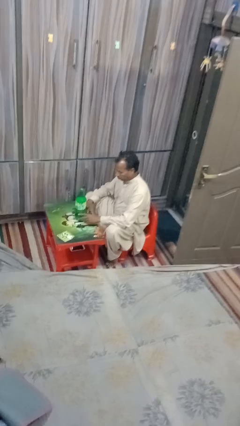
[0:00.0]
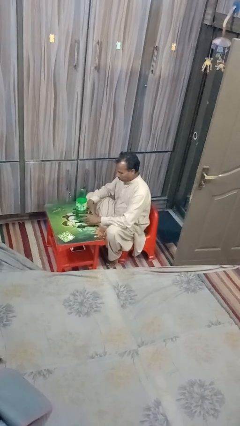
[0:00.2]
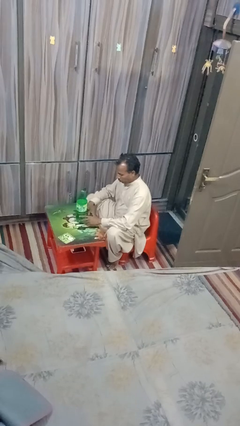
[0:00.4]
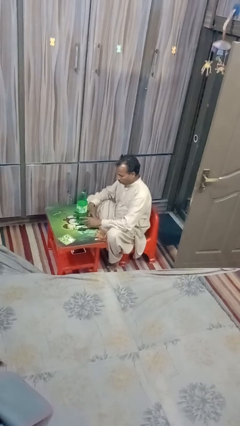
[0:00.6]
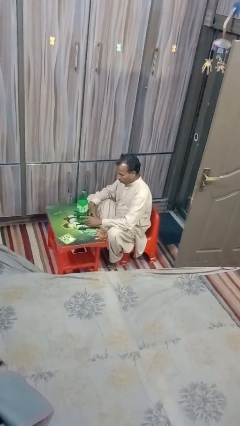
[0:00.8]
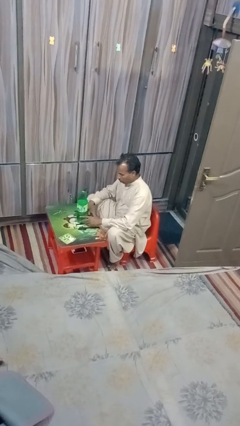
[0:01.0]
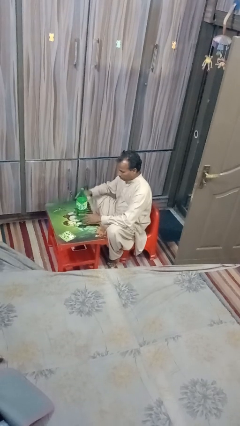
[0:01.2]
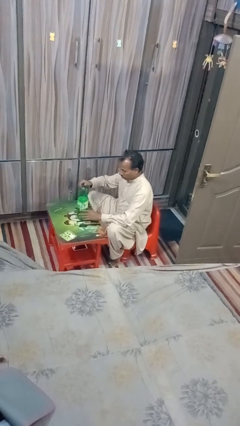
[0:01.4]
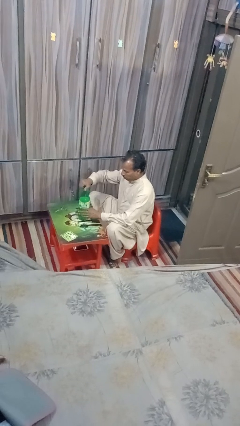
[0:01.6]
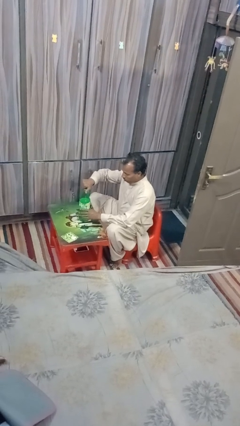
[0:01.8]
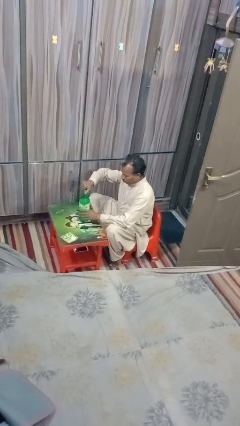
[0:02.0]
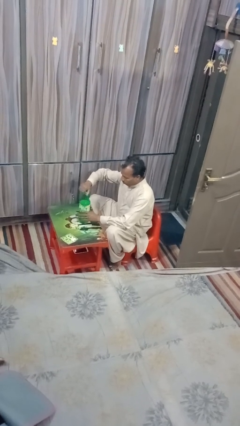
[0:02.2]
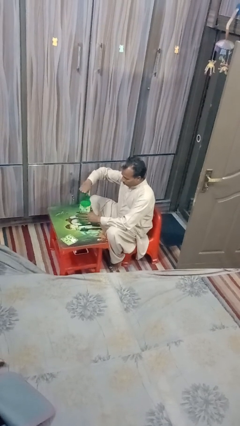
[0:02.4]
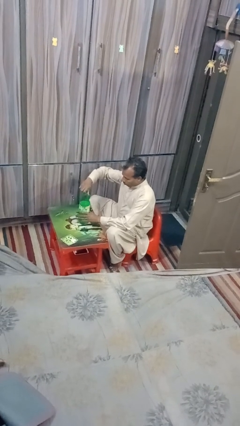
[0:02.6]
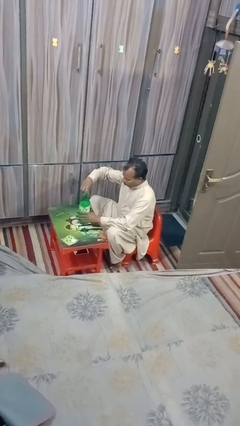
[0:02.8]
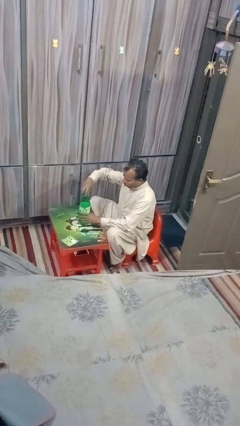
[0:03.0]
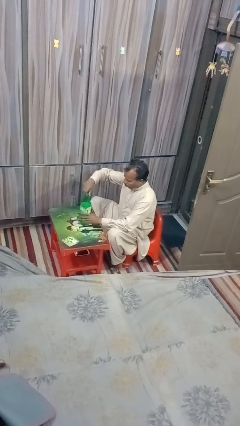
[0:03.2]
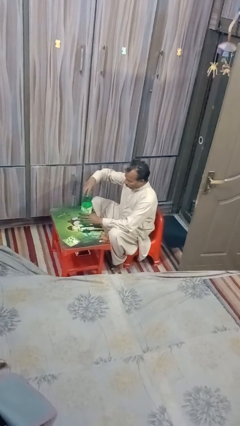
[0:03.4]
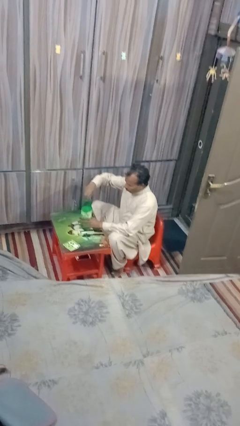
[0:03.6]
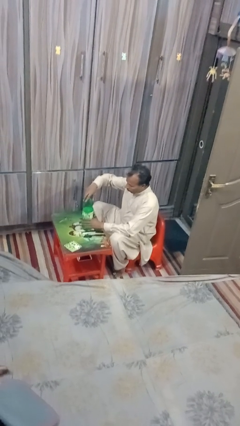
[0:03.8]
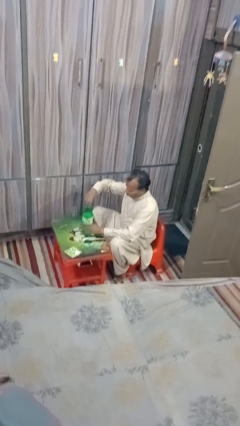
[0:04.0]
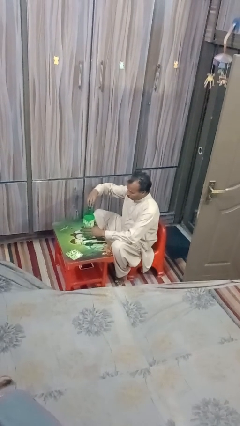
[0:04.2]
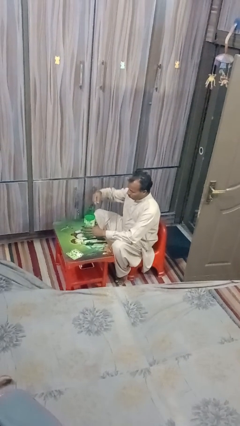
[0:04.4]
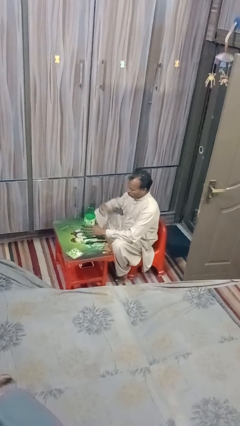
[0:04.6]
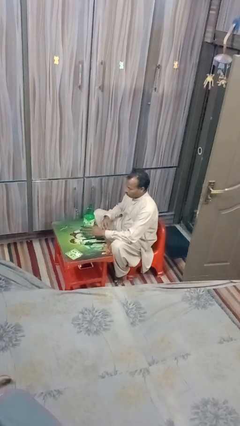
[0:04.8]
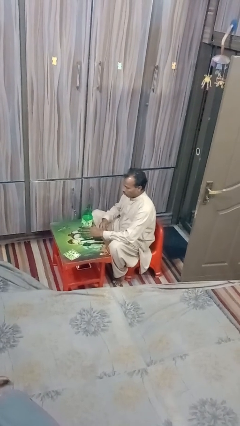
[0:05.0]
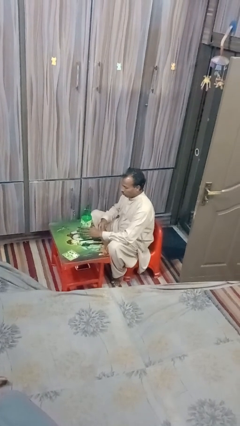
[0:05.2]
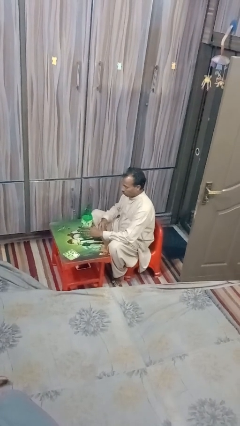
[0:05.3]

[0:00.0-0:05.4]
person unscrews lid from bottle

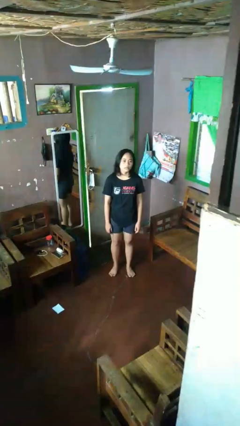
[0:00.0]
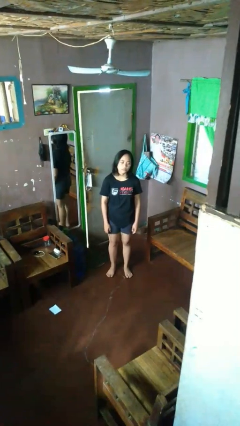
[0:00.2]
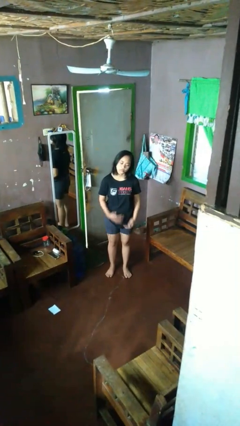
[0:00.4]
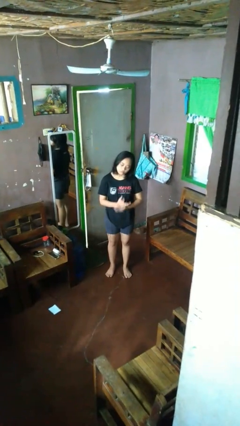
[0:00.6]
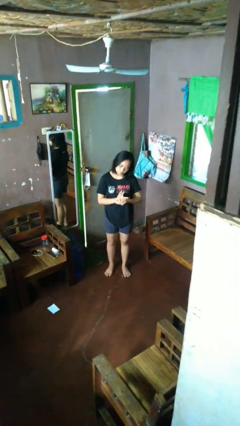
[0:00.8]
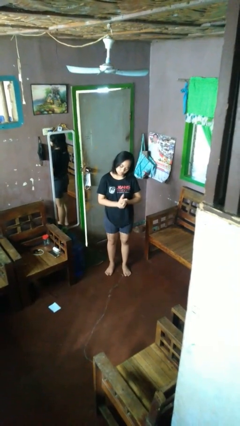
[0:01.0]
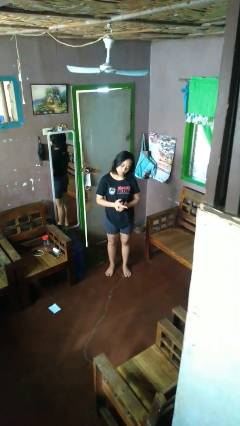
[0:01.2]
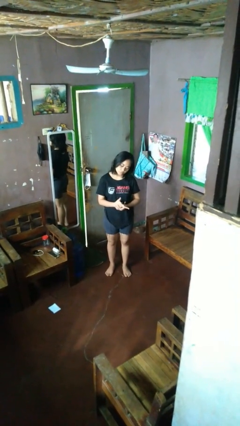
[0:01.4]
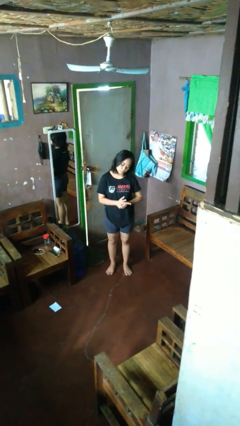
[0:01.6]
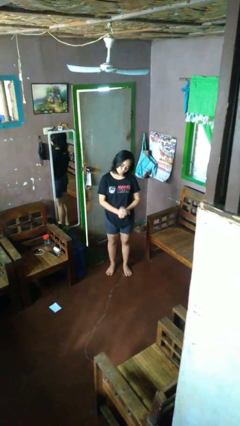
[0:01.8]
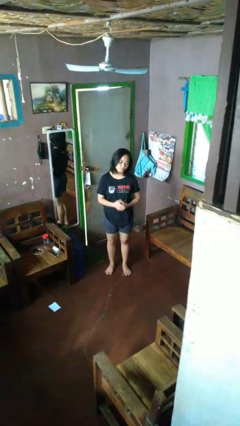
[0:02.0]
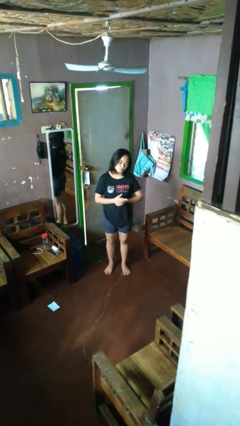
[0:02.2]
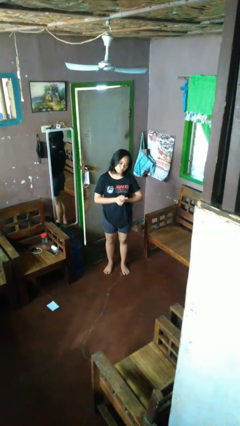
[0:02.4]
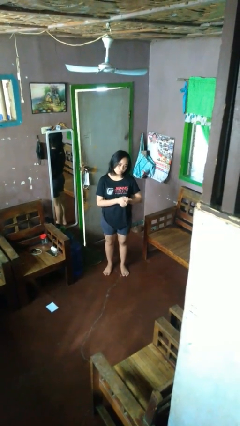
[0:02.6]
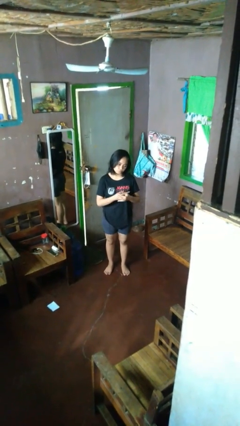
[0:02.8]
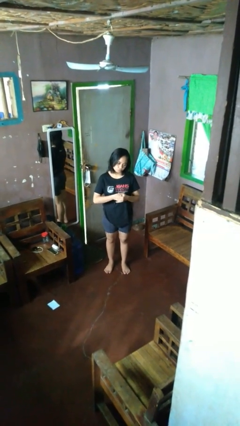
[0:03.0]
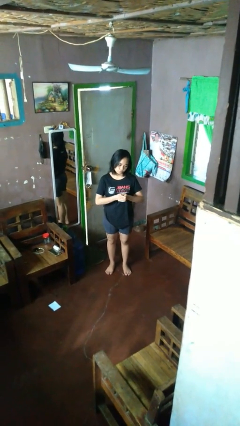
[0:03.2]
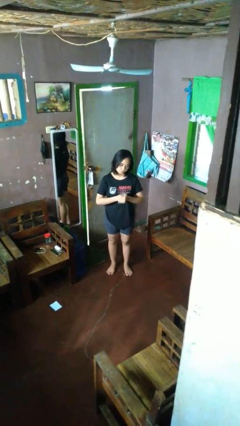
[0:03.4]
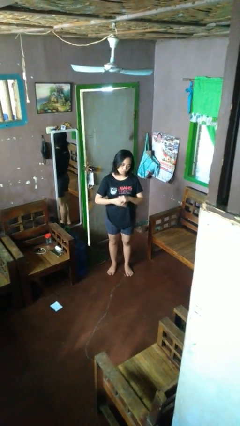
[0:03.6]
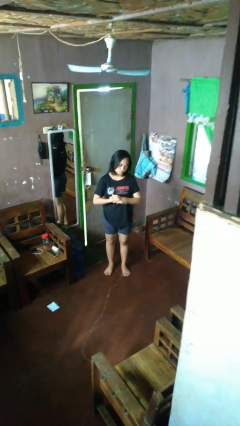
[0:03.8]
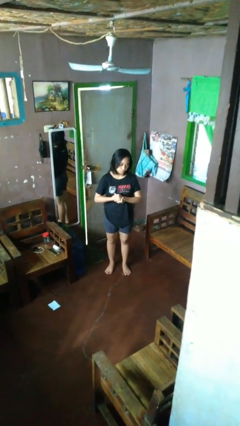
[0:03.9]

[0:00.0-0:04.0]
person cracks knuckles

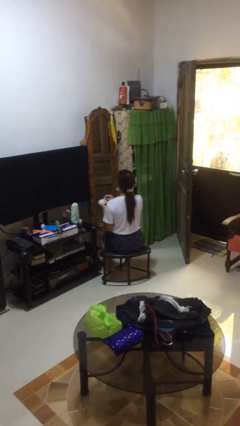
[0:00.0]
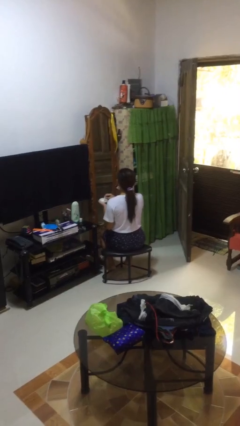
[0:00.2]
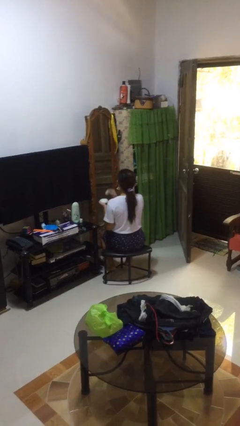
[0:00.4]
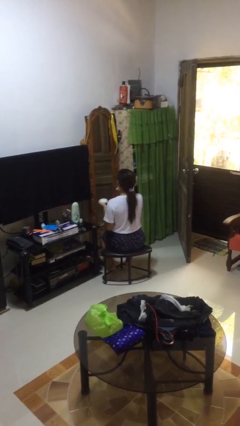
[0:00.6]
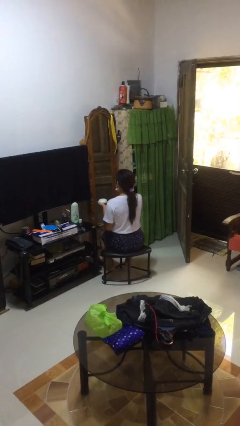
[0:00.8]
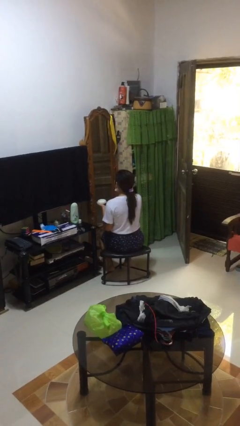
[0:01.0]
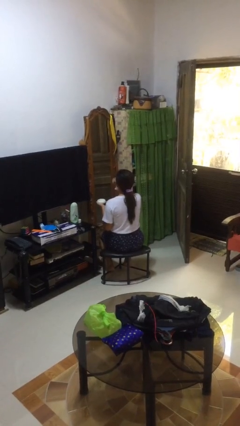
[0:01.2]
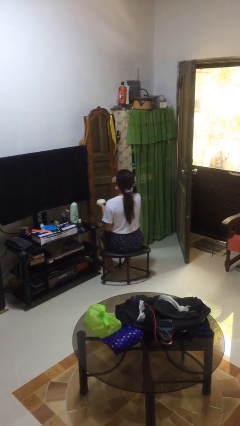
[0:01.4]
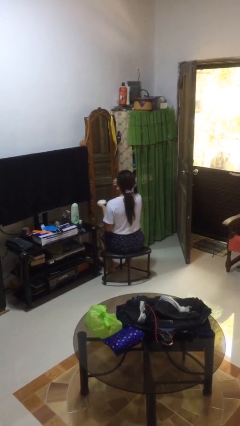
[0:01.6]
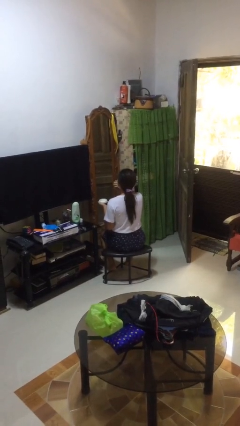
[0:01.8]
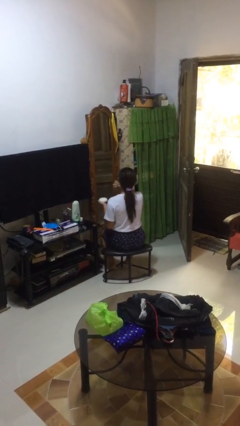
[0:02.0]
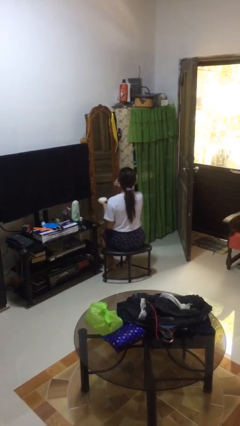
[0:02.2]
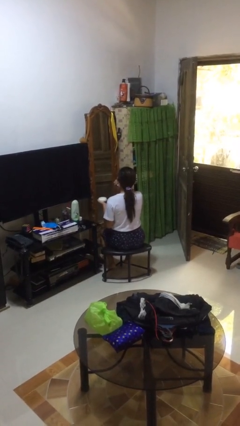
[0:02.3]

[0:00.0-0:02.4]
person applies foundation makeup

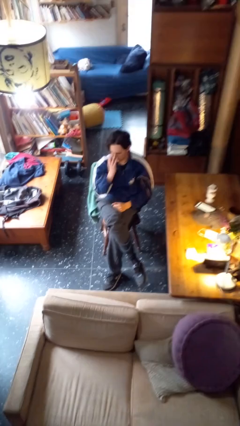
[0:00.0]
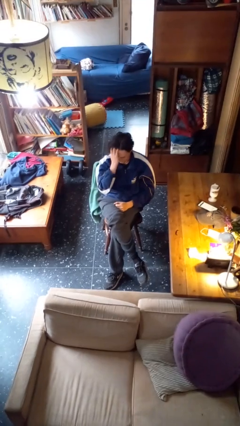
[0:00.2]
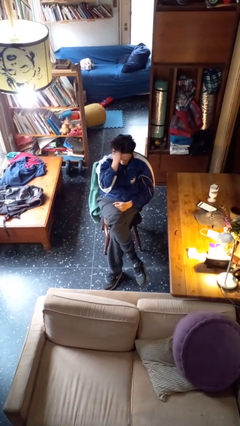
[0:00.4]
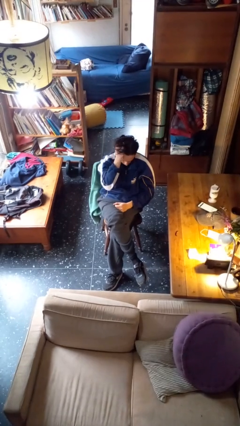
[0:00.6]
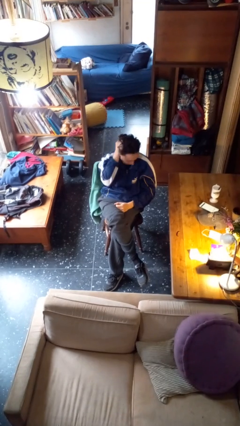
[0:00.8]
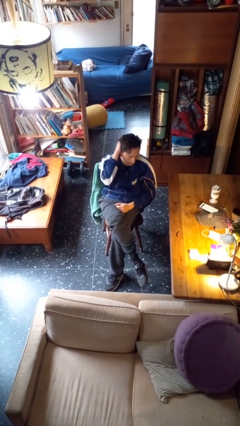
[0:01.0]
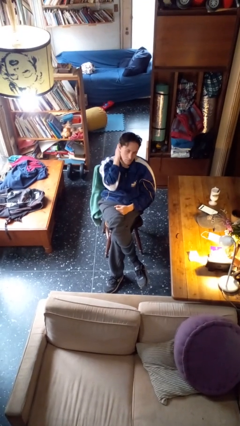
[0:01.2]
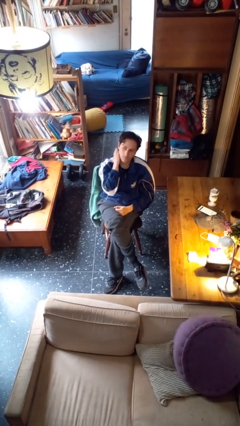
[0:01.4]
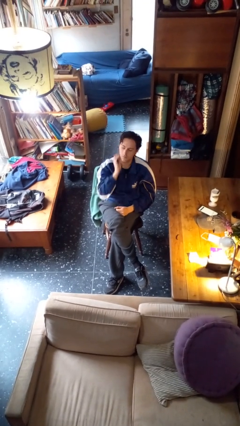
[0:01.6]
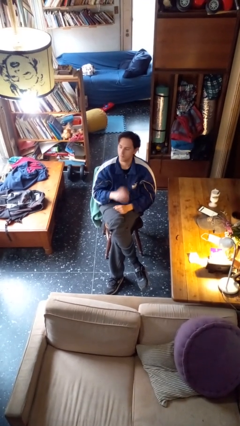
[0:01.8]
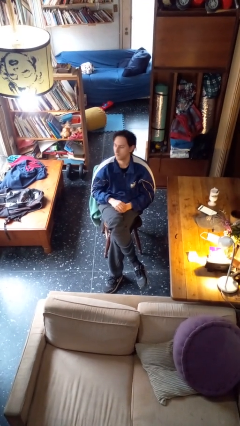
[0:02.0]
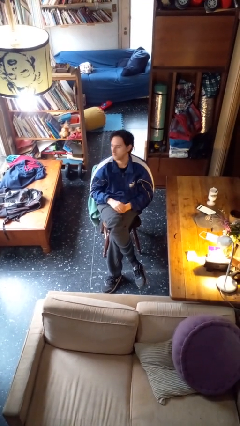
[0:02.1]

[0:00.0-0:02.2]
person strokes hair

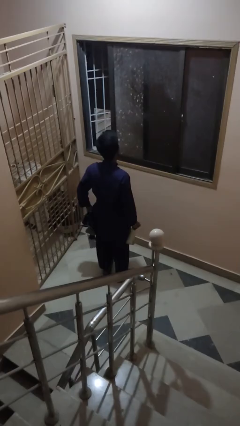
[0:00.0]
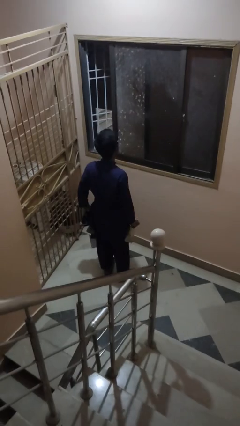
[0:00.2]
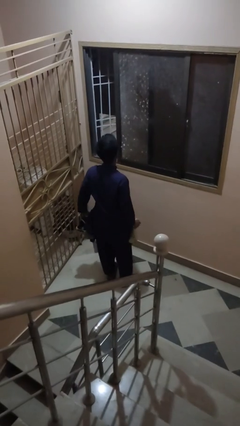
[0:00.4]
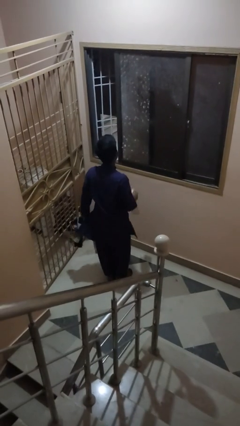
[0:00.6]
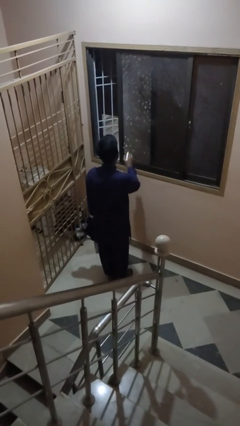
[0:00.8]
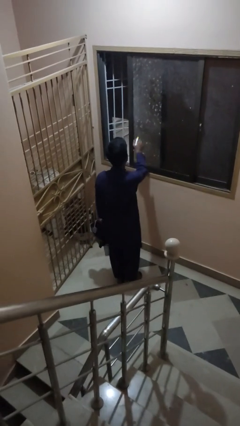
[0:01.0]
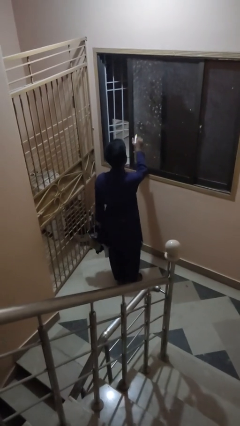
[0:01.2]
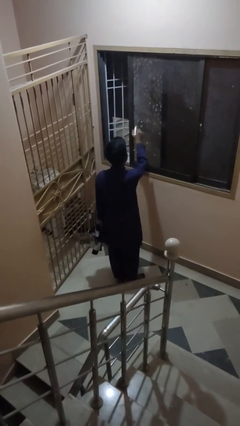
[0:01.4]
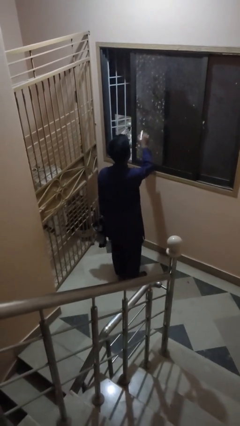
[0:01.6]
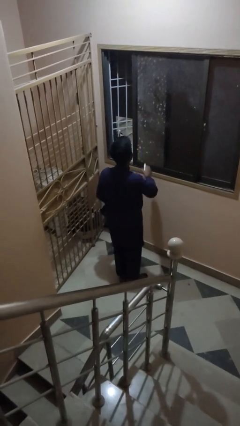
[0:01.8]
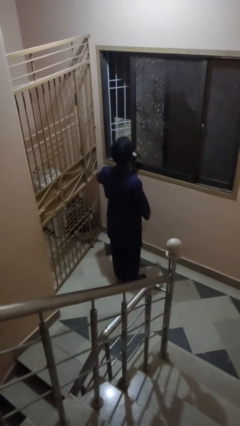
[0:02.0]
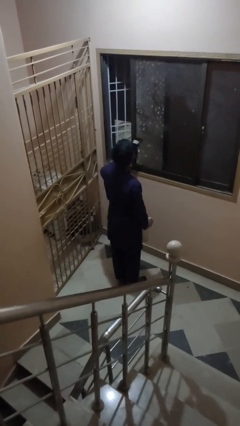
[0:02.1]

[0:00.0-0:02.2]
person sprays from bottle

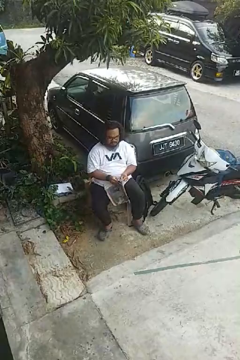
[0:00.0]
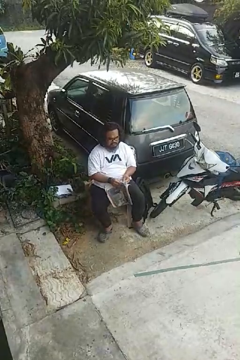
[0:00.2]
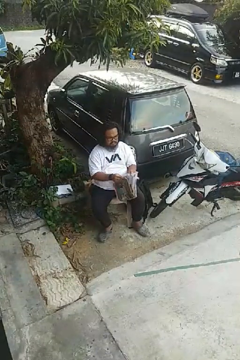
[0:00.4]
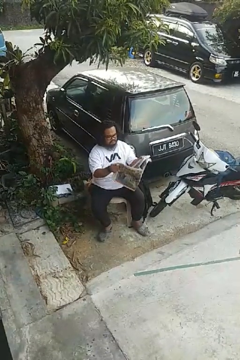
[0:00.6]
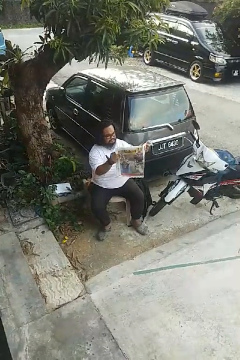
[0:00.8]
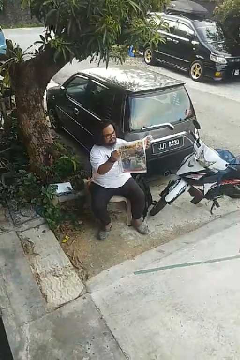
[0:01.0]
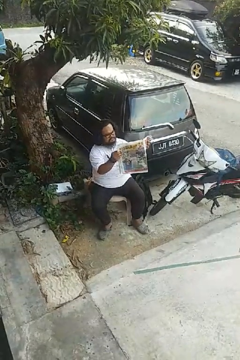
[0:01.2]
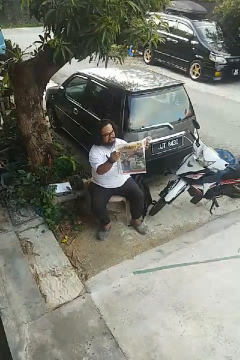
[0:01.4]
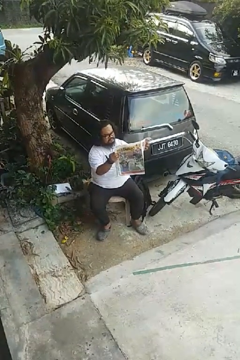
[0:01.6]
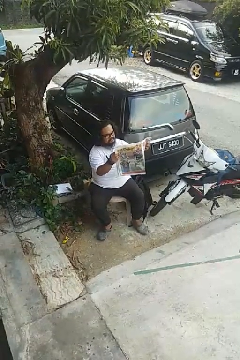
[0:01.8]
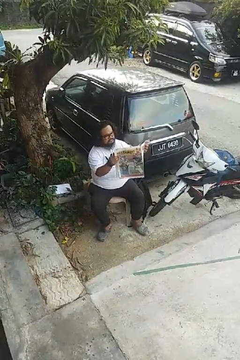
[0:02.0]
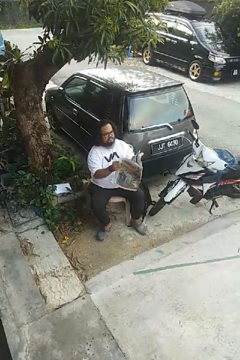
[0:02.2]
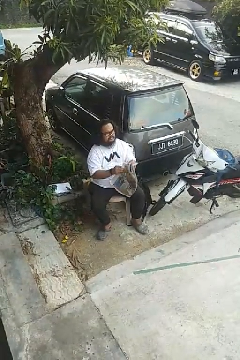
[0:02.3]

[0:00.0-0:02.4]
person reads newspaper
